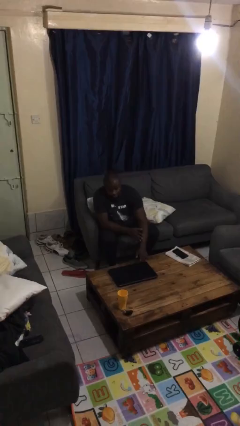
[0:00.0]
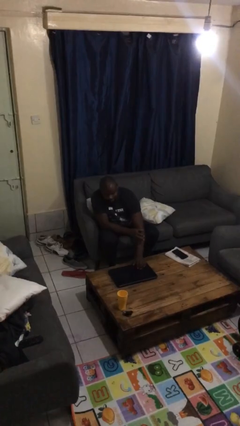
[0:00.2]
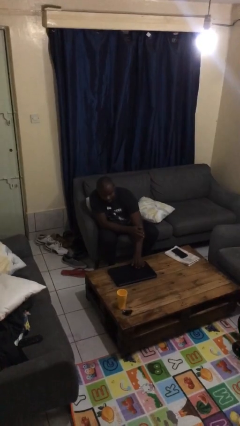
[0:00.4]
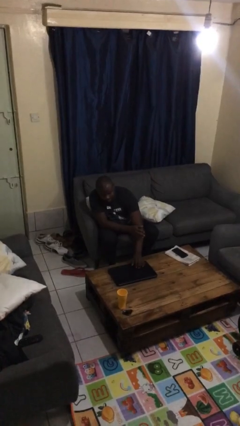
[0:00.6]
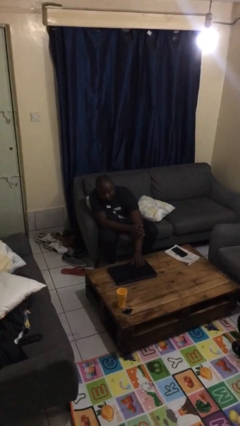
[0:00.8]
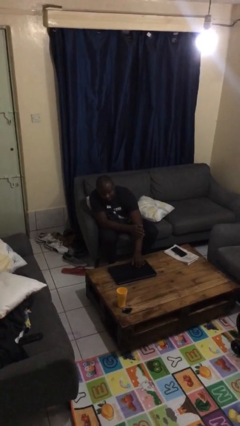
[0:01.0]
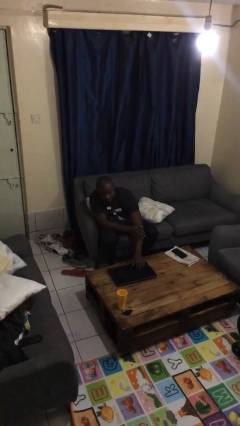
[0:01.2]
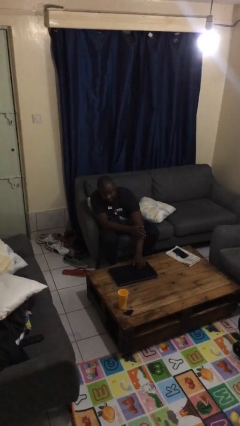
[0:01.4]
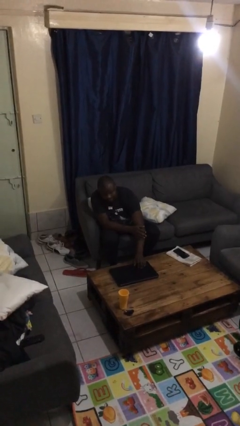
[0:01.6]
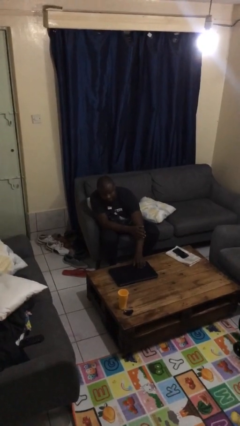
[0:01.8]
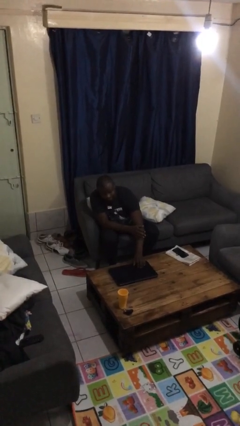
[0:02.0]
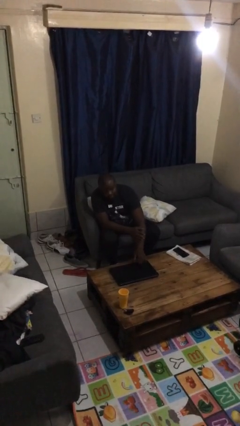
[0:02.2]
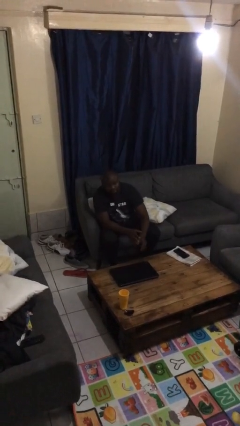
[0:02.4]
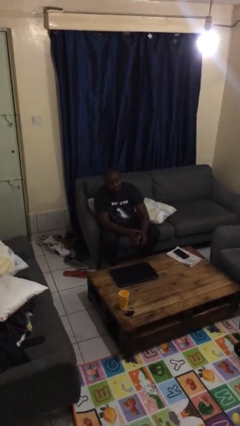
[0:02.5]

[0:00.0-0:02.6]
person taps object with finger

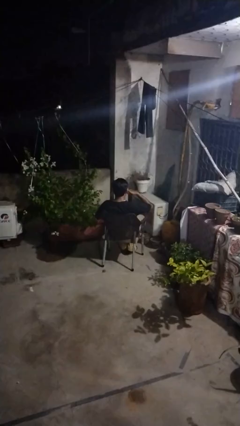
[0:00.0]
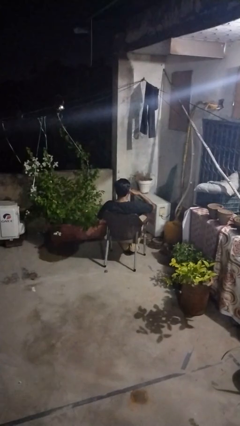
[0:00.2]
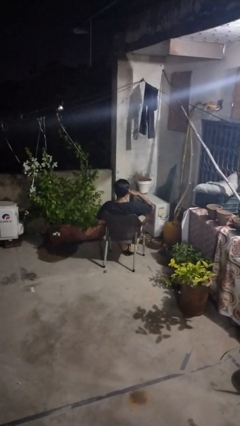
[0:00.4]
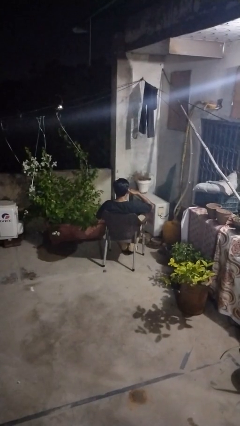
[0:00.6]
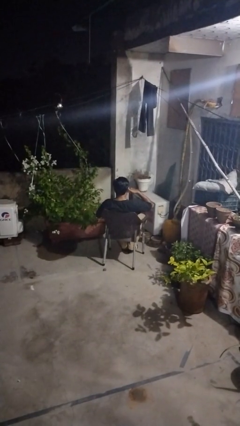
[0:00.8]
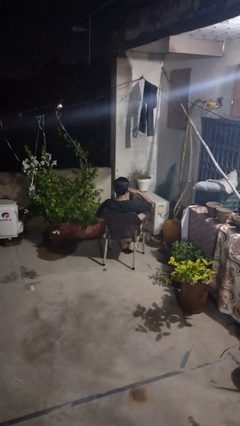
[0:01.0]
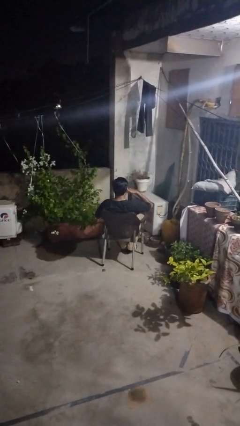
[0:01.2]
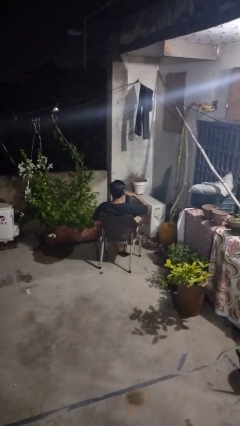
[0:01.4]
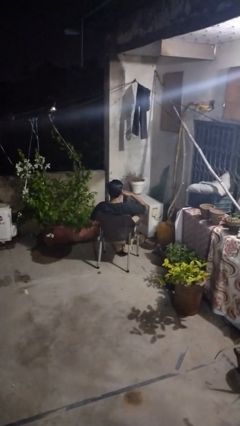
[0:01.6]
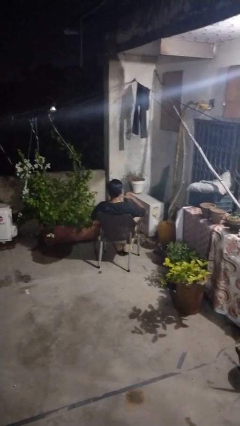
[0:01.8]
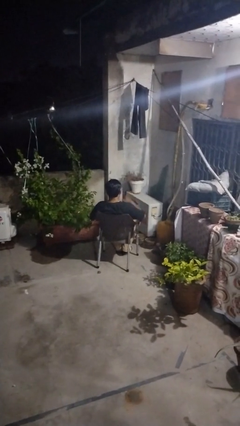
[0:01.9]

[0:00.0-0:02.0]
person gestures call me

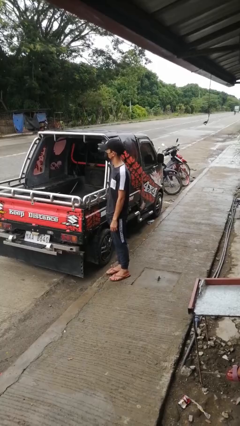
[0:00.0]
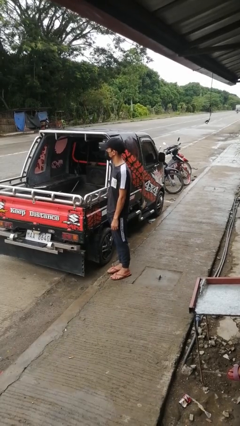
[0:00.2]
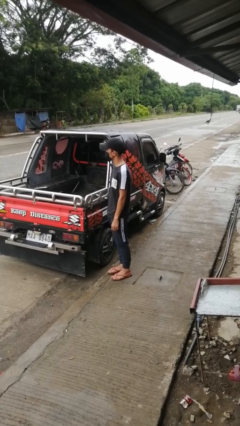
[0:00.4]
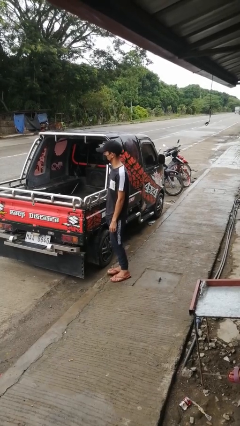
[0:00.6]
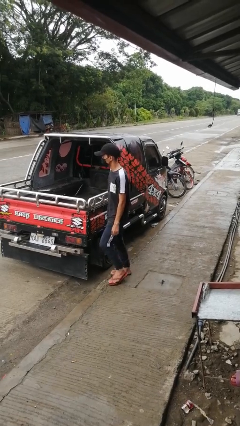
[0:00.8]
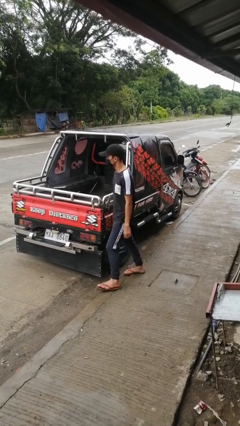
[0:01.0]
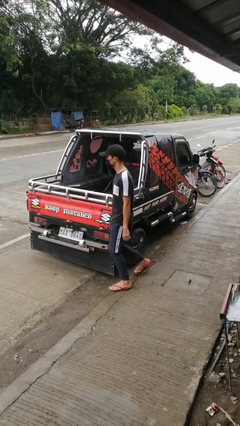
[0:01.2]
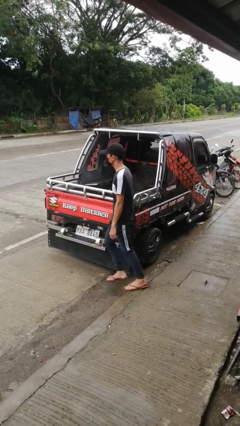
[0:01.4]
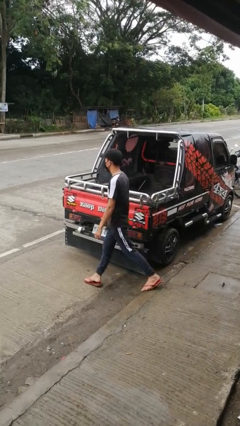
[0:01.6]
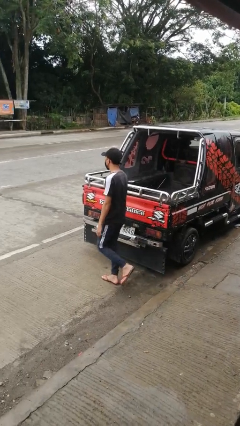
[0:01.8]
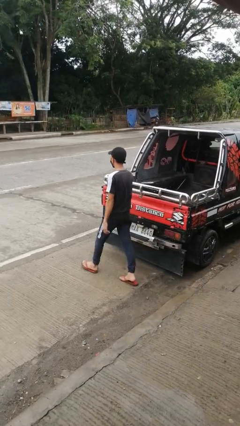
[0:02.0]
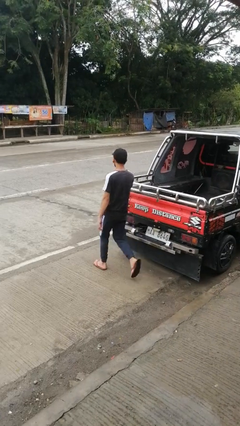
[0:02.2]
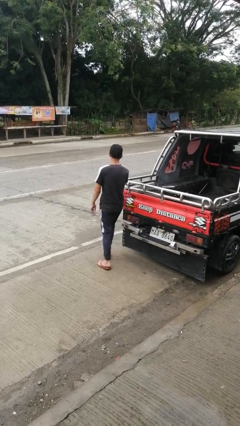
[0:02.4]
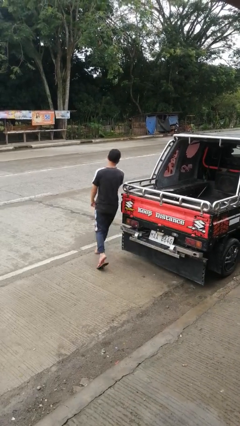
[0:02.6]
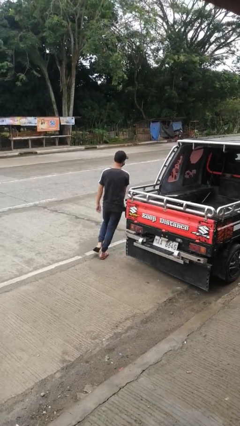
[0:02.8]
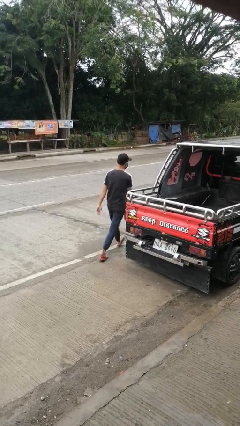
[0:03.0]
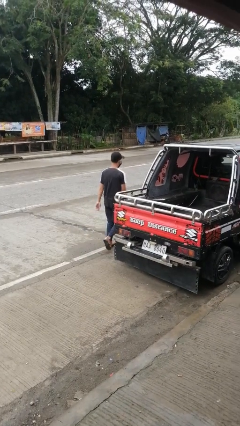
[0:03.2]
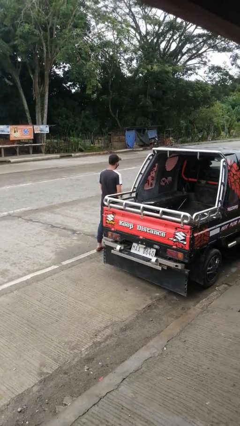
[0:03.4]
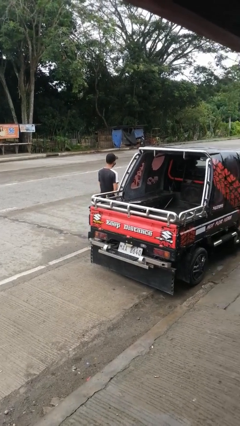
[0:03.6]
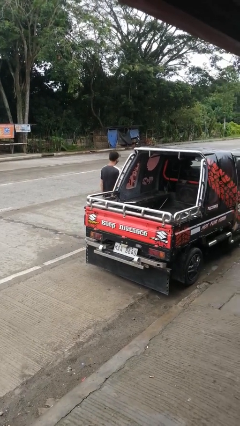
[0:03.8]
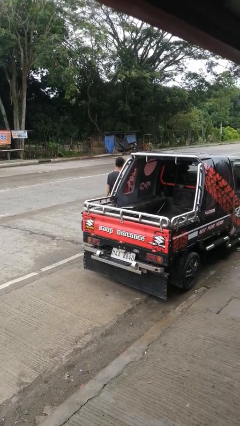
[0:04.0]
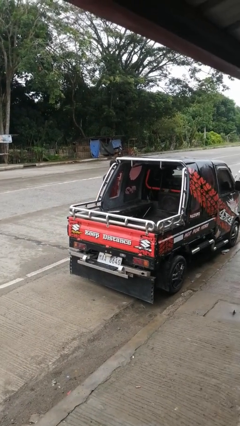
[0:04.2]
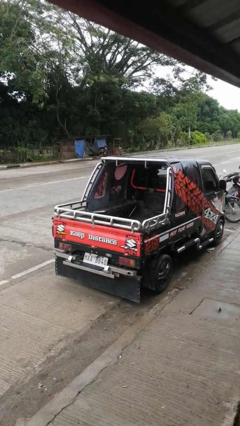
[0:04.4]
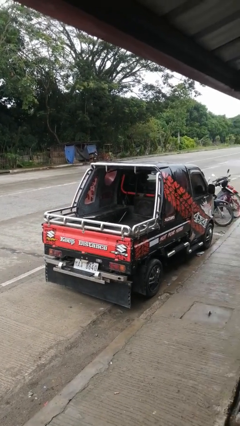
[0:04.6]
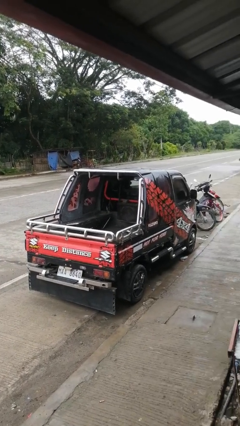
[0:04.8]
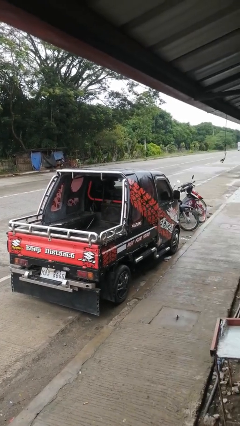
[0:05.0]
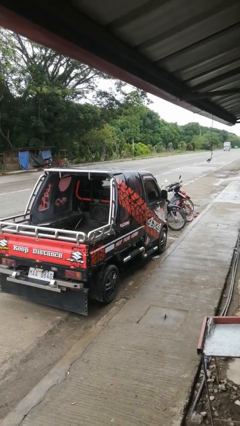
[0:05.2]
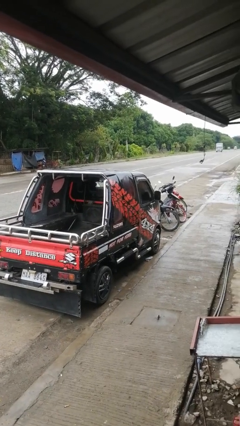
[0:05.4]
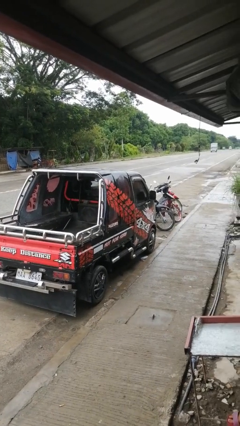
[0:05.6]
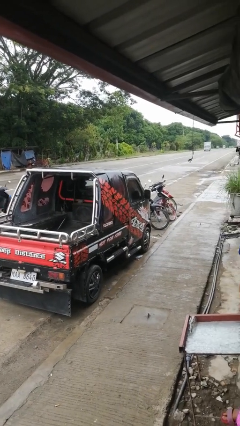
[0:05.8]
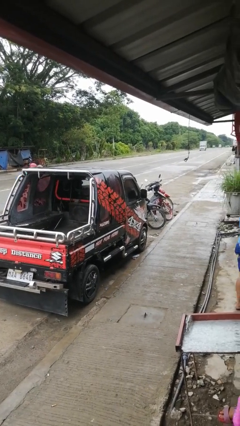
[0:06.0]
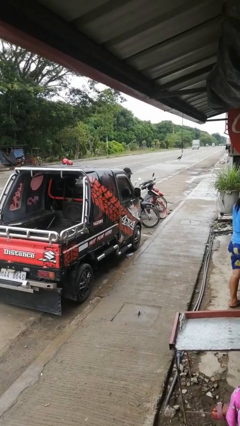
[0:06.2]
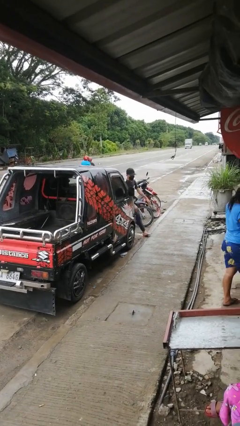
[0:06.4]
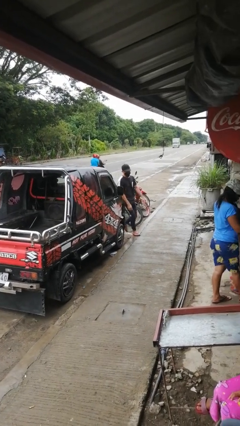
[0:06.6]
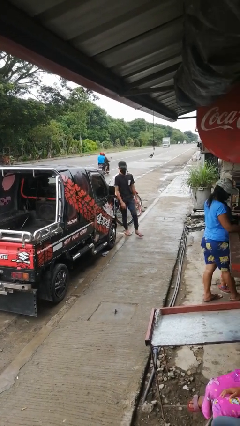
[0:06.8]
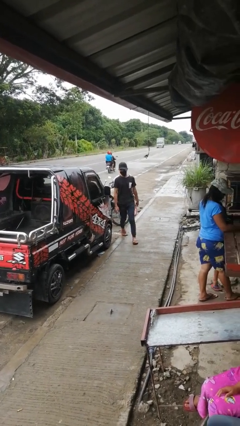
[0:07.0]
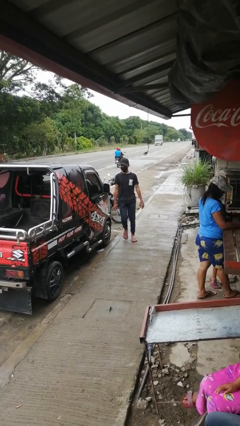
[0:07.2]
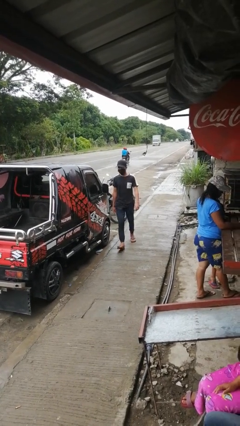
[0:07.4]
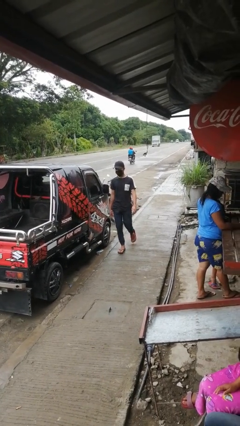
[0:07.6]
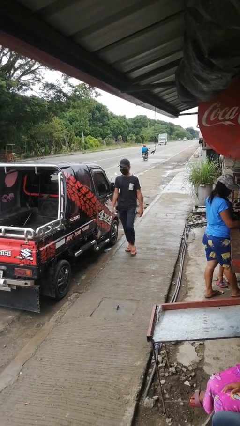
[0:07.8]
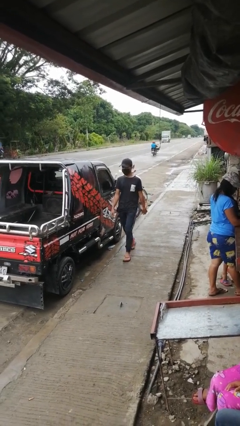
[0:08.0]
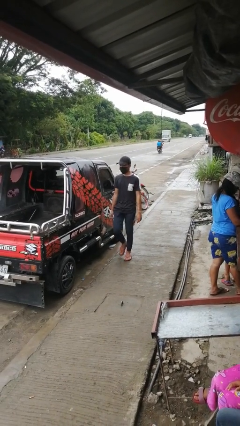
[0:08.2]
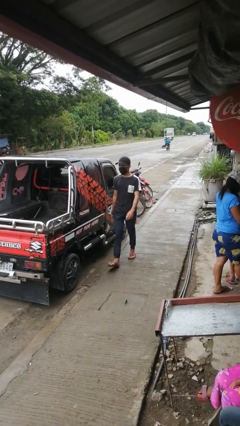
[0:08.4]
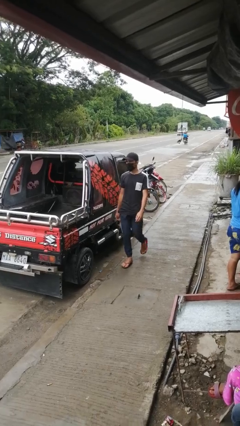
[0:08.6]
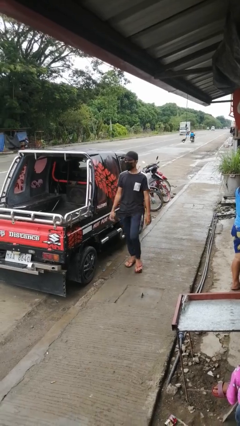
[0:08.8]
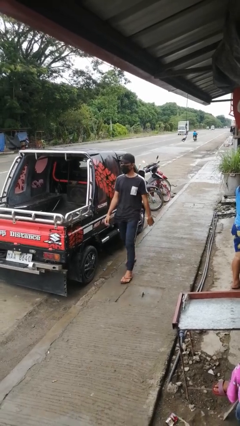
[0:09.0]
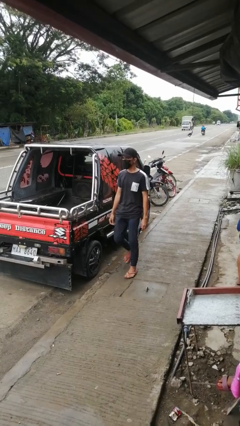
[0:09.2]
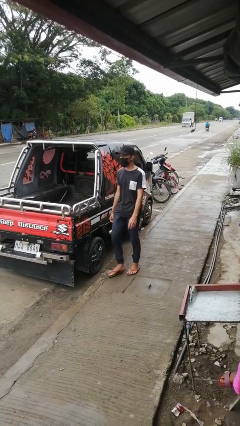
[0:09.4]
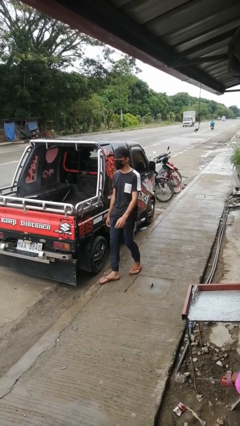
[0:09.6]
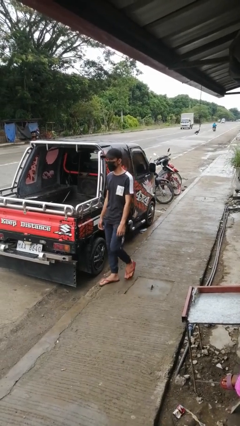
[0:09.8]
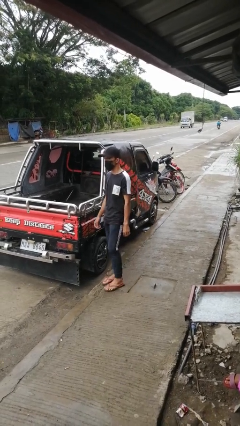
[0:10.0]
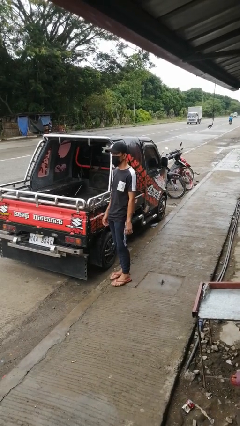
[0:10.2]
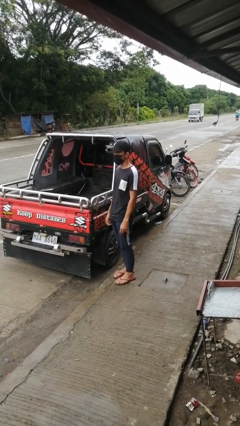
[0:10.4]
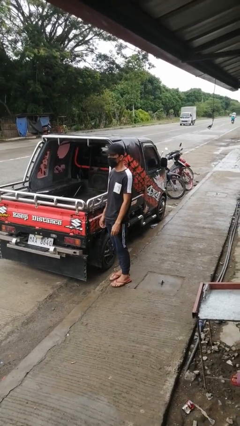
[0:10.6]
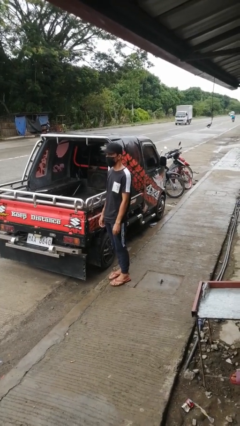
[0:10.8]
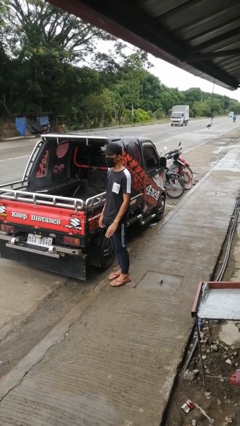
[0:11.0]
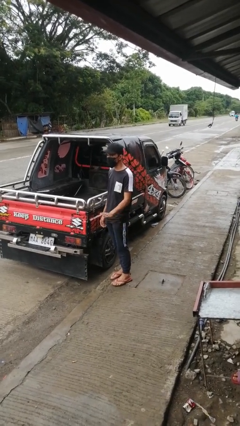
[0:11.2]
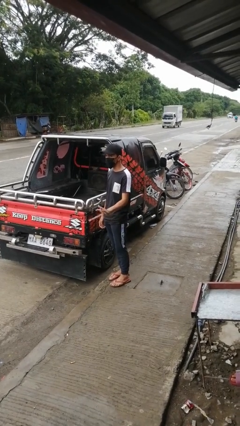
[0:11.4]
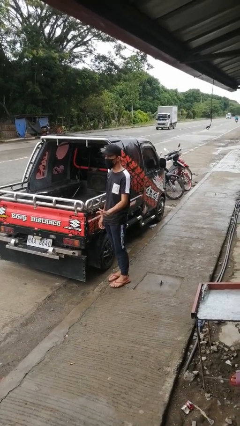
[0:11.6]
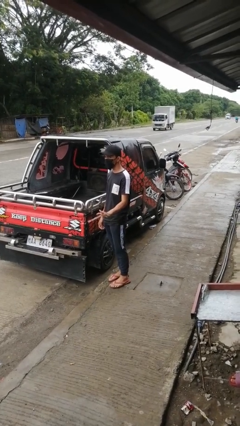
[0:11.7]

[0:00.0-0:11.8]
person walks around car

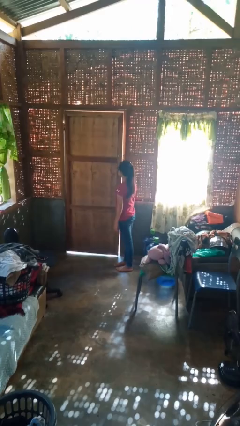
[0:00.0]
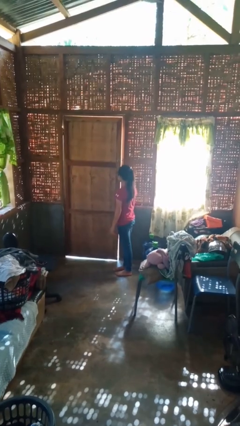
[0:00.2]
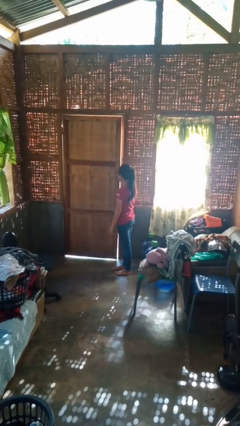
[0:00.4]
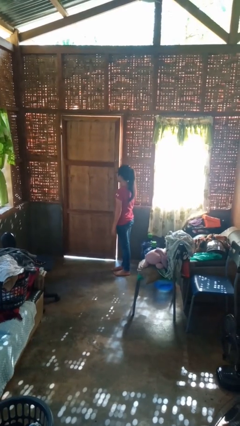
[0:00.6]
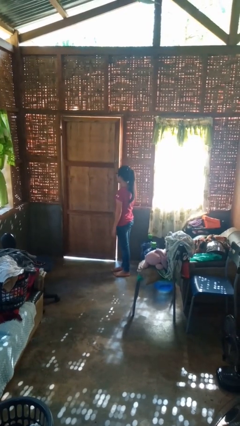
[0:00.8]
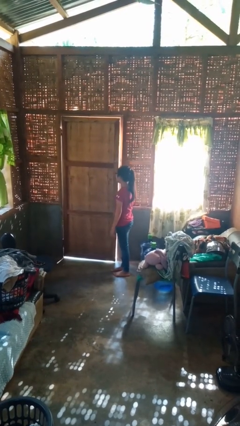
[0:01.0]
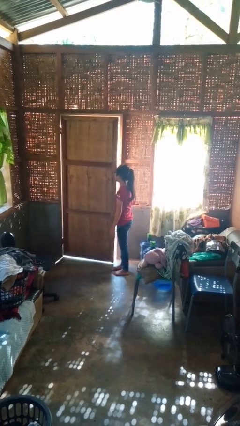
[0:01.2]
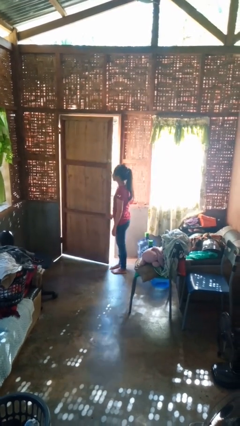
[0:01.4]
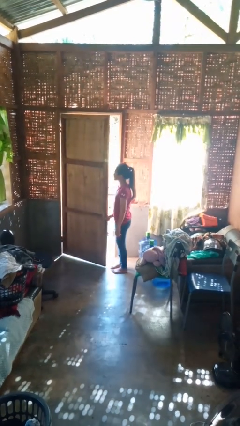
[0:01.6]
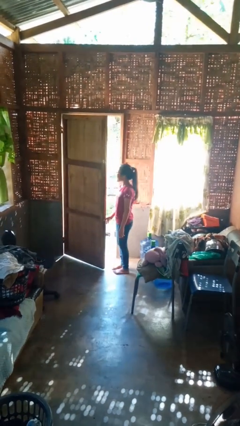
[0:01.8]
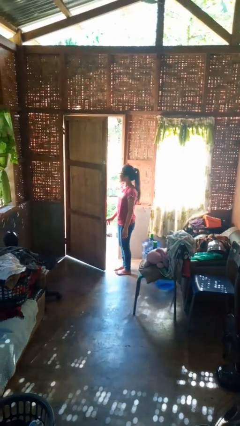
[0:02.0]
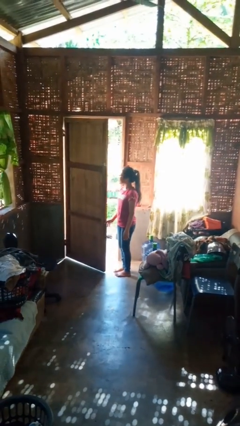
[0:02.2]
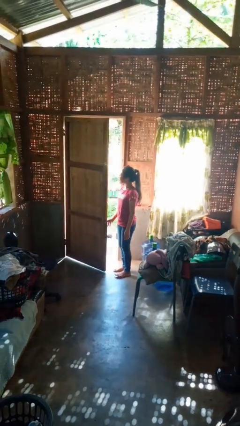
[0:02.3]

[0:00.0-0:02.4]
person opens facility door
